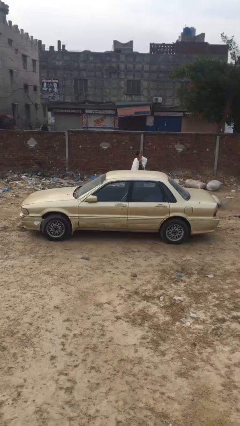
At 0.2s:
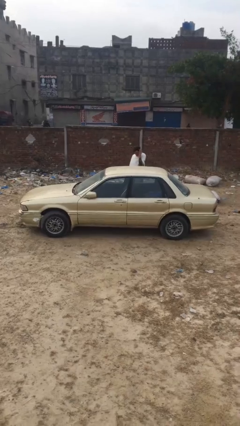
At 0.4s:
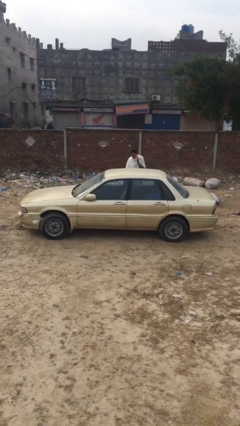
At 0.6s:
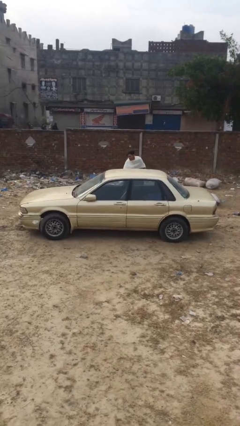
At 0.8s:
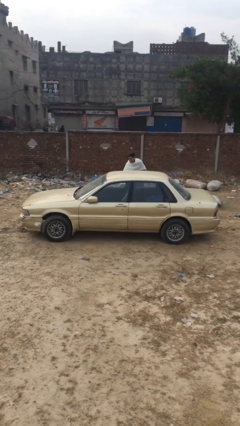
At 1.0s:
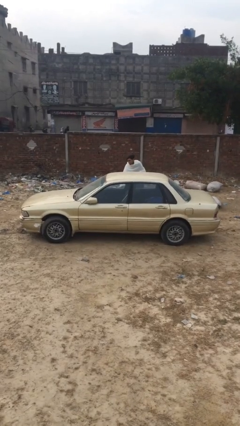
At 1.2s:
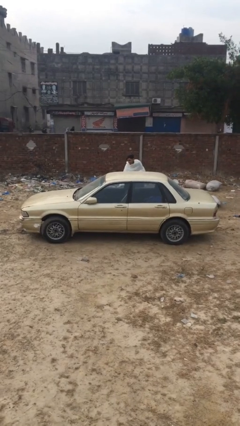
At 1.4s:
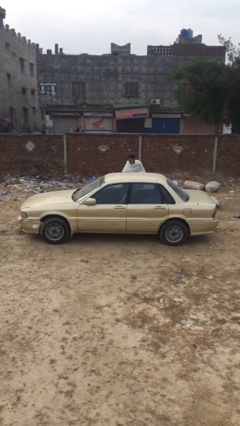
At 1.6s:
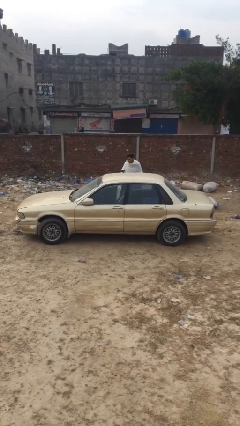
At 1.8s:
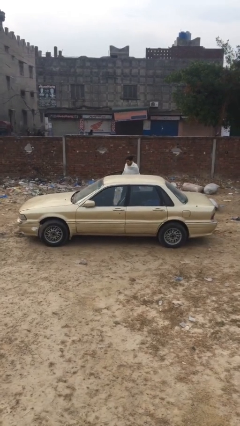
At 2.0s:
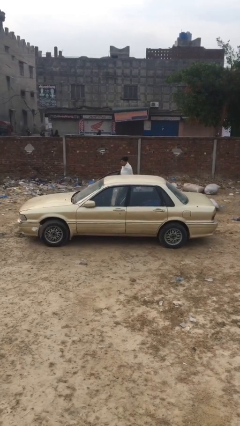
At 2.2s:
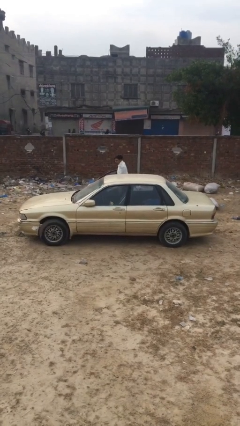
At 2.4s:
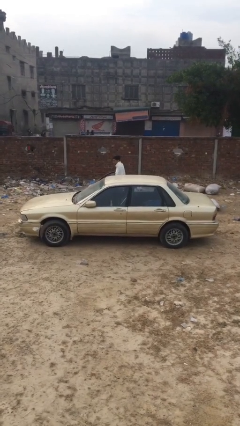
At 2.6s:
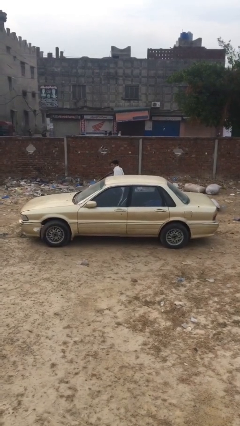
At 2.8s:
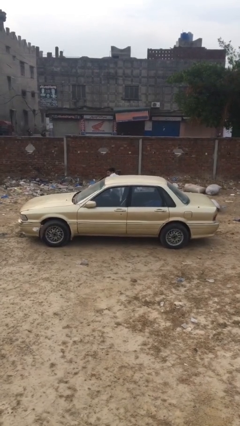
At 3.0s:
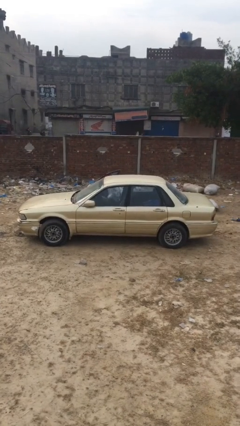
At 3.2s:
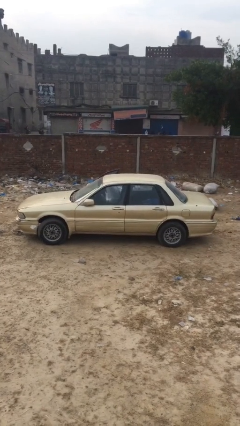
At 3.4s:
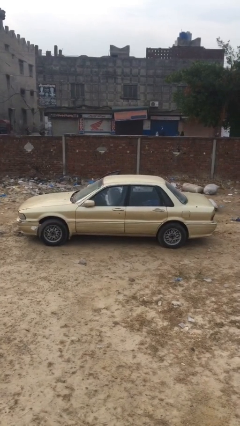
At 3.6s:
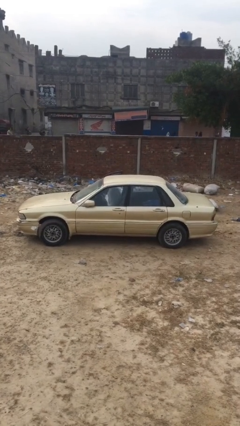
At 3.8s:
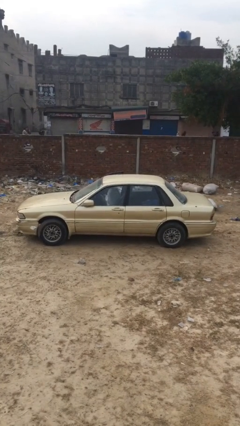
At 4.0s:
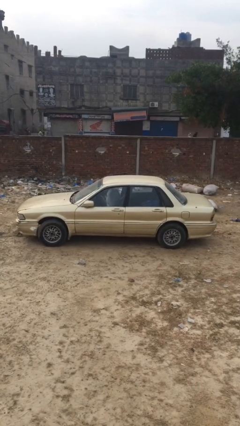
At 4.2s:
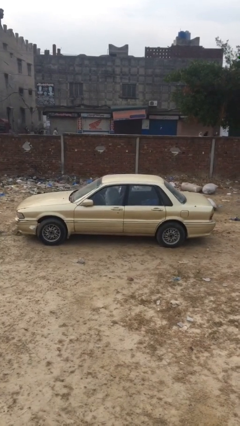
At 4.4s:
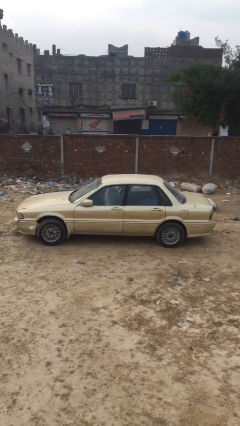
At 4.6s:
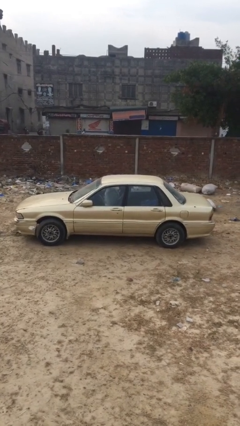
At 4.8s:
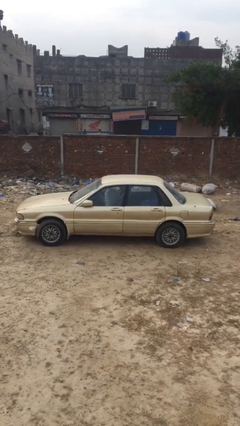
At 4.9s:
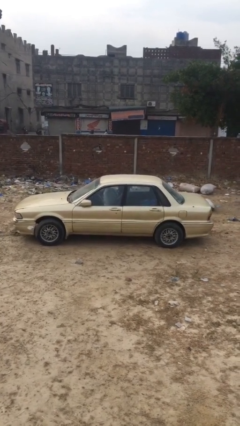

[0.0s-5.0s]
car picks up person

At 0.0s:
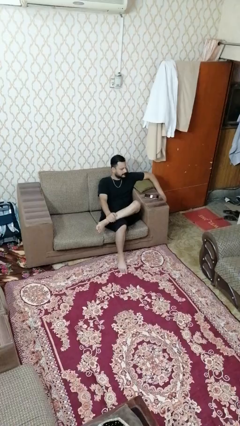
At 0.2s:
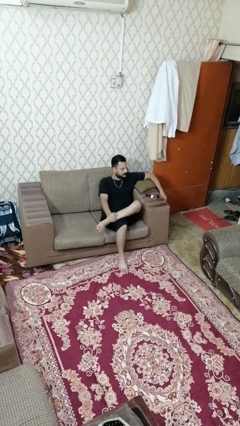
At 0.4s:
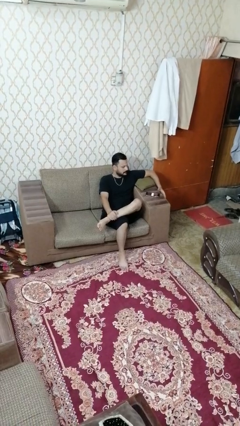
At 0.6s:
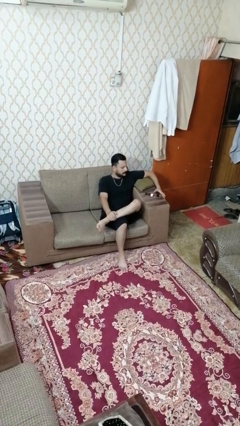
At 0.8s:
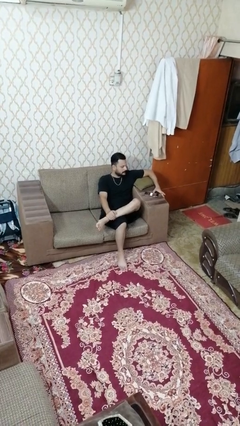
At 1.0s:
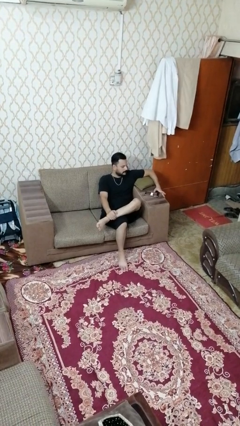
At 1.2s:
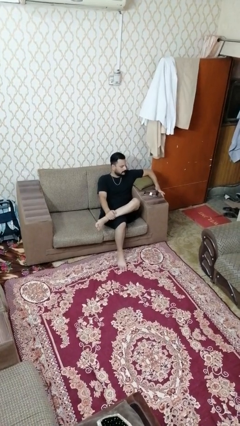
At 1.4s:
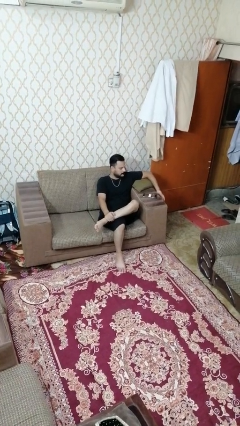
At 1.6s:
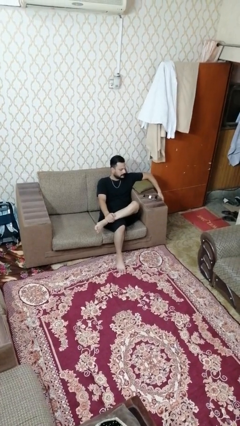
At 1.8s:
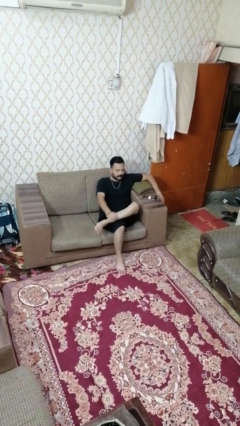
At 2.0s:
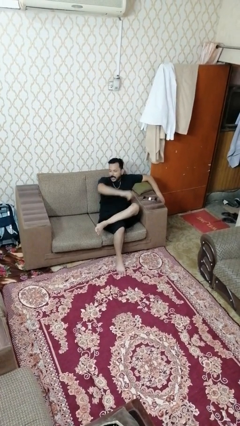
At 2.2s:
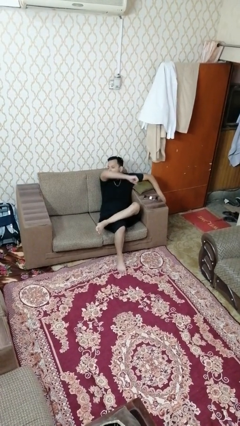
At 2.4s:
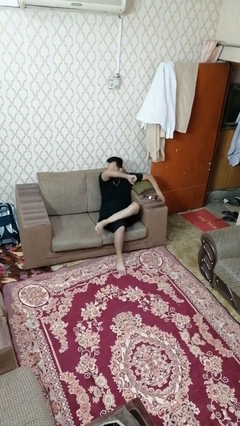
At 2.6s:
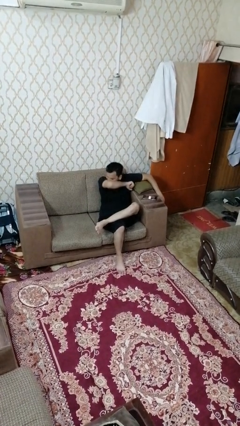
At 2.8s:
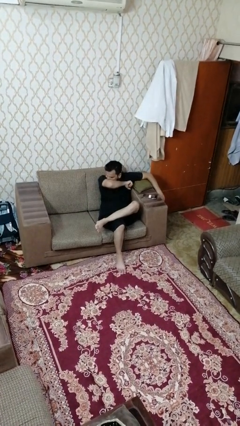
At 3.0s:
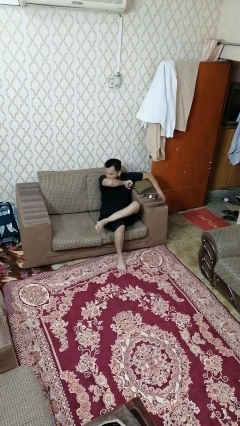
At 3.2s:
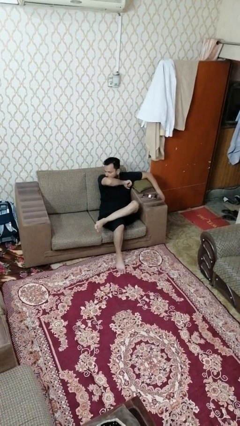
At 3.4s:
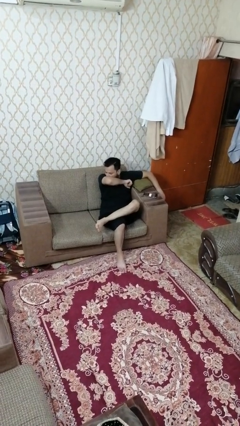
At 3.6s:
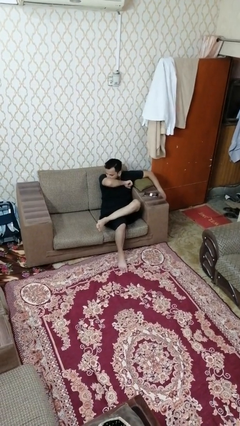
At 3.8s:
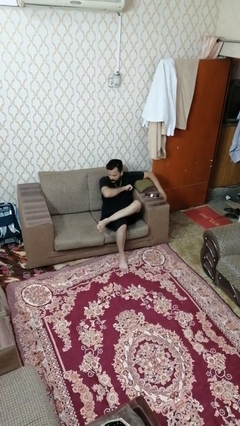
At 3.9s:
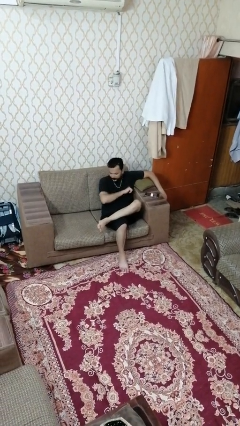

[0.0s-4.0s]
person sneezes into arm

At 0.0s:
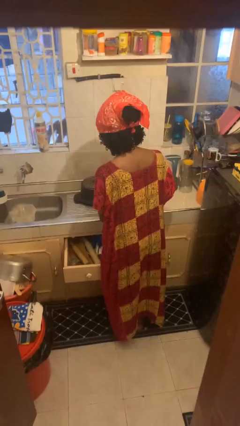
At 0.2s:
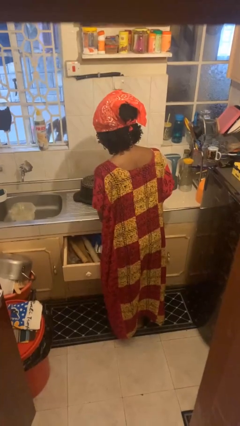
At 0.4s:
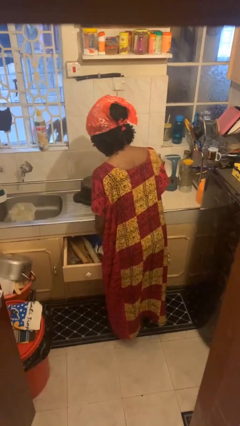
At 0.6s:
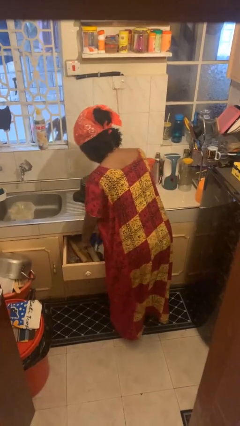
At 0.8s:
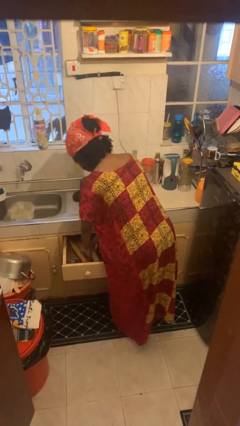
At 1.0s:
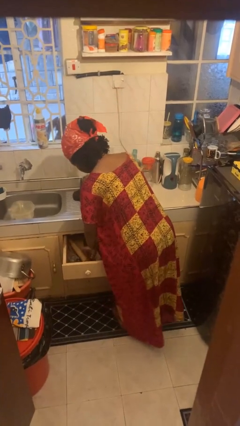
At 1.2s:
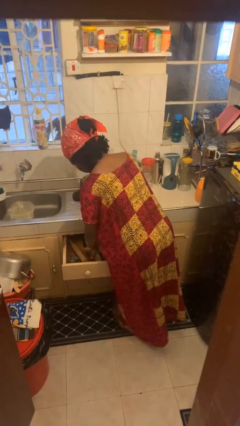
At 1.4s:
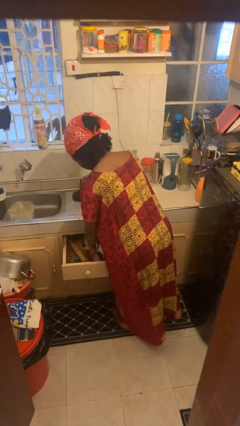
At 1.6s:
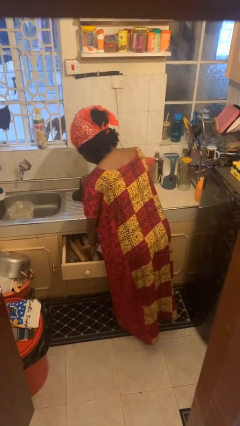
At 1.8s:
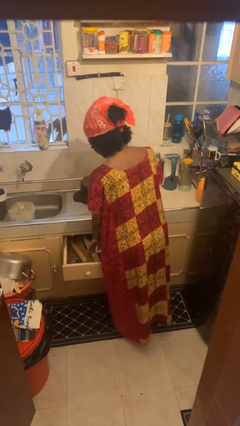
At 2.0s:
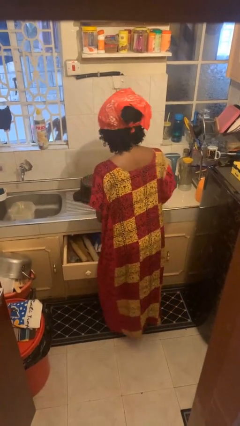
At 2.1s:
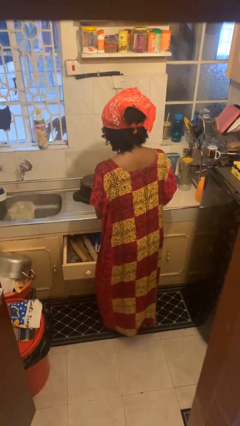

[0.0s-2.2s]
person searches in kitchen drawer

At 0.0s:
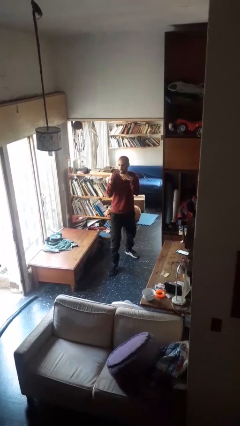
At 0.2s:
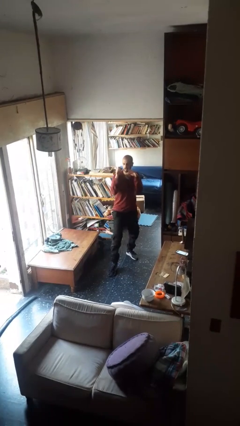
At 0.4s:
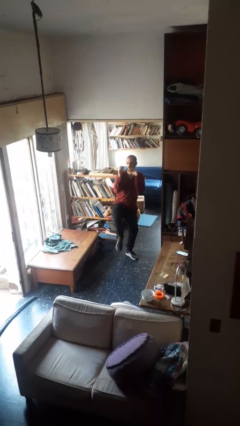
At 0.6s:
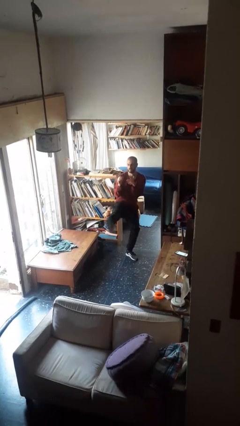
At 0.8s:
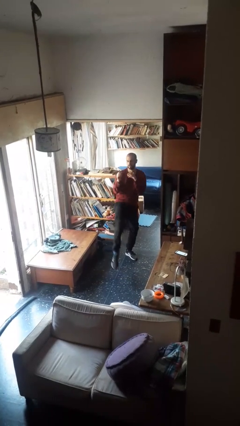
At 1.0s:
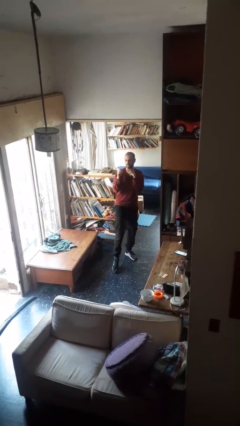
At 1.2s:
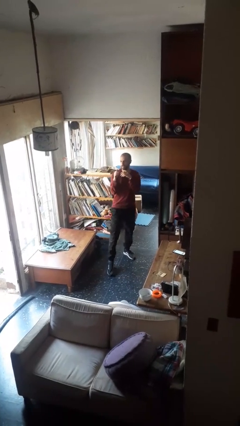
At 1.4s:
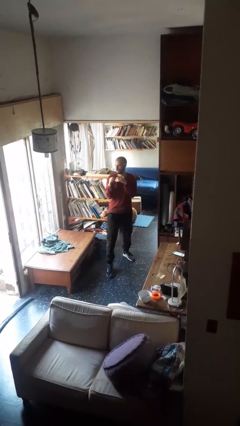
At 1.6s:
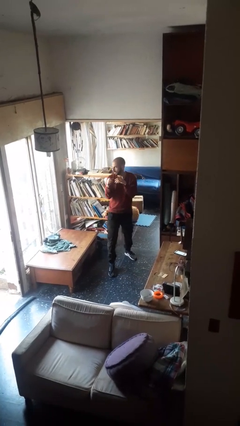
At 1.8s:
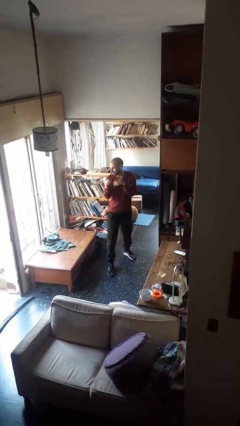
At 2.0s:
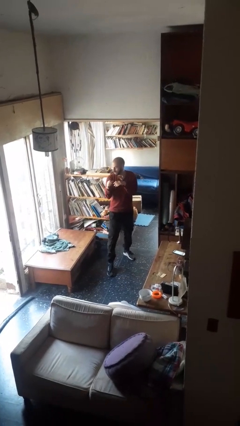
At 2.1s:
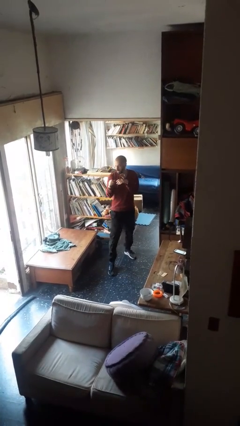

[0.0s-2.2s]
person karate kicks

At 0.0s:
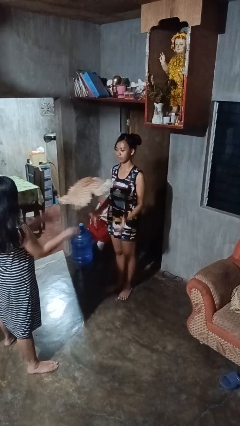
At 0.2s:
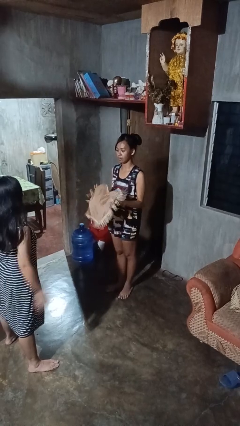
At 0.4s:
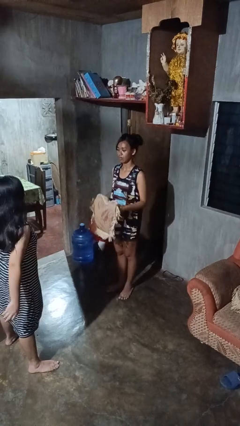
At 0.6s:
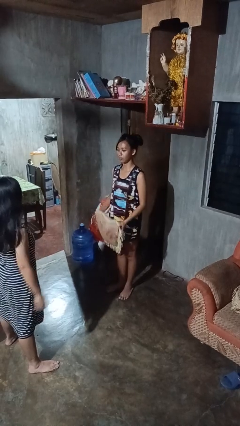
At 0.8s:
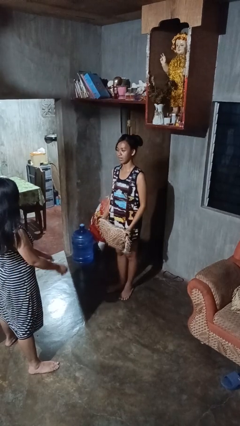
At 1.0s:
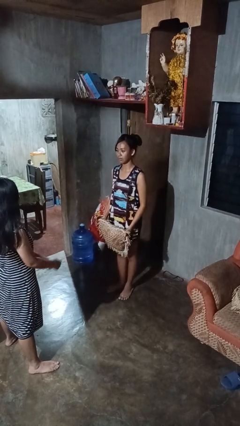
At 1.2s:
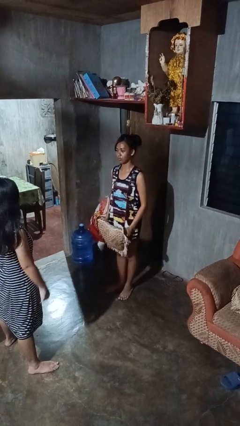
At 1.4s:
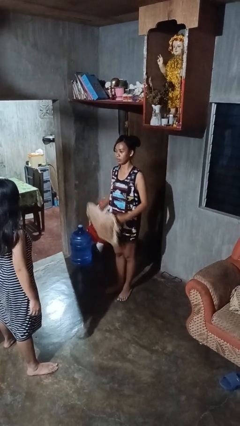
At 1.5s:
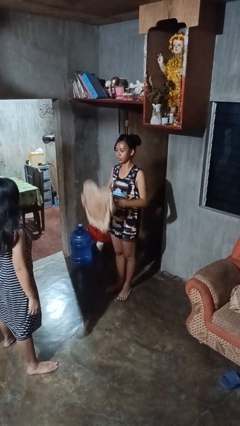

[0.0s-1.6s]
person catches object from person

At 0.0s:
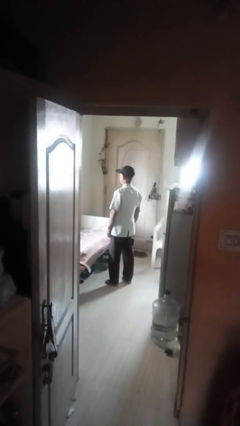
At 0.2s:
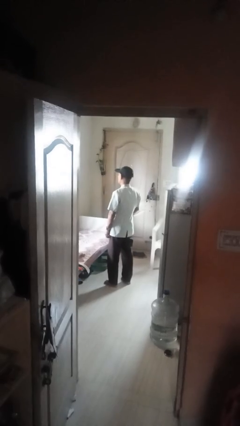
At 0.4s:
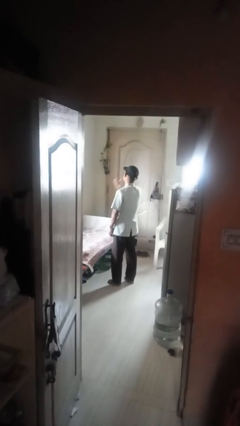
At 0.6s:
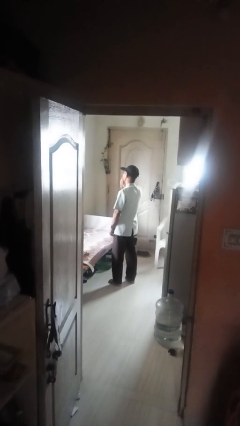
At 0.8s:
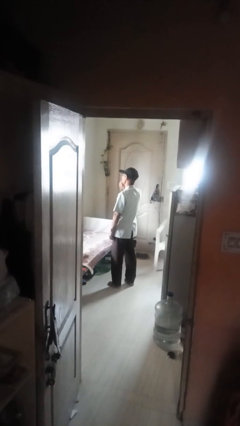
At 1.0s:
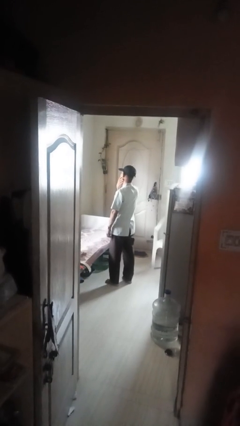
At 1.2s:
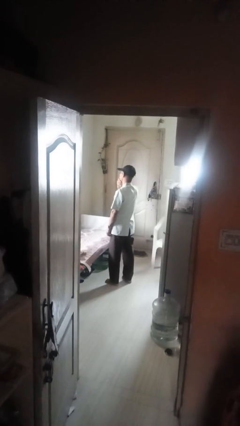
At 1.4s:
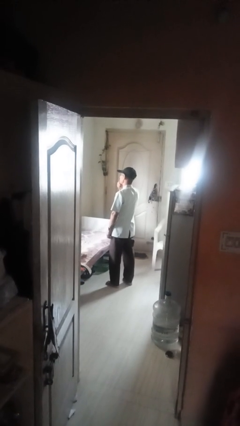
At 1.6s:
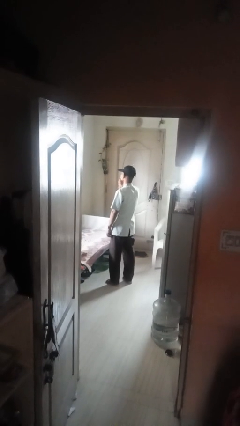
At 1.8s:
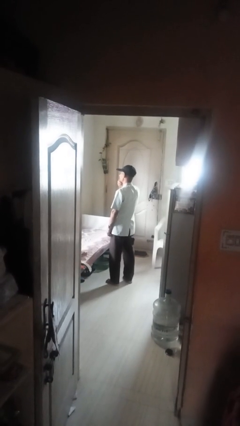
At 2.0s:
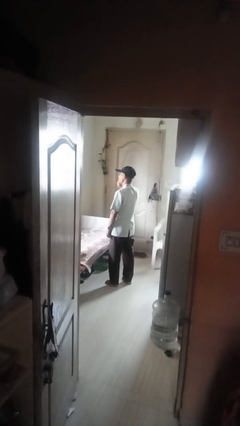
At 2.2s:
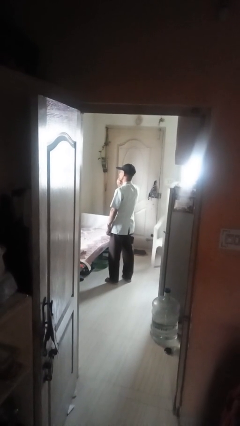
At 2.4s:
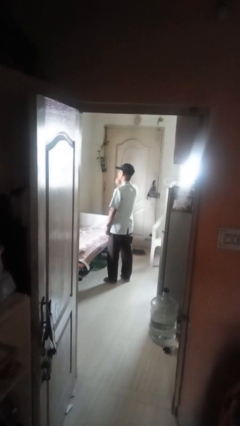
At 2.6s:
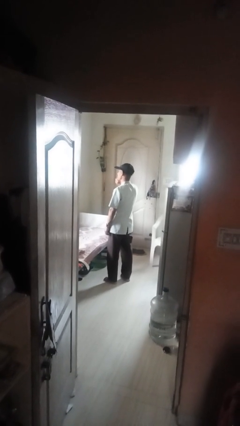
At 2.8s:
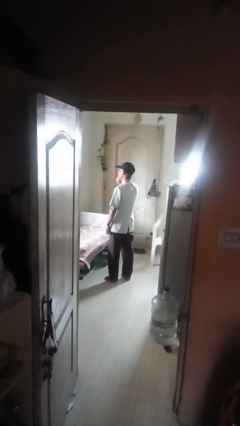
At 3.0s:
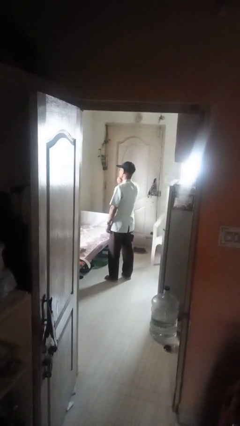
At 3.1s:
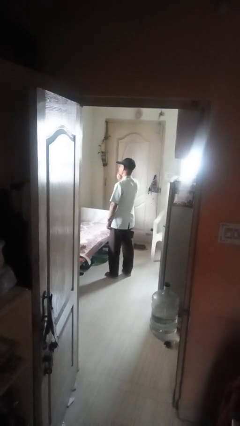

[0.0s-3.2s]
person strokes chin
